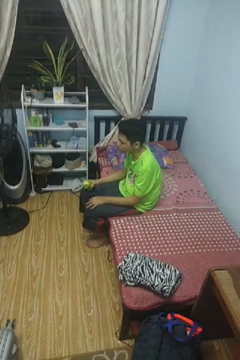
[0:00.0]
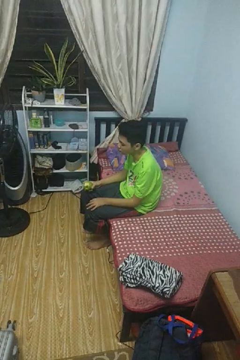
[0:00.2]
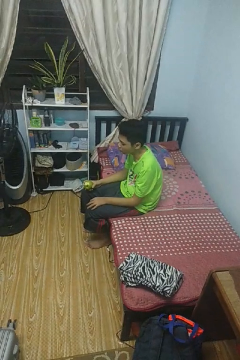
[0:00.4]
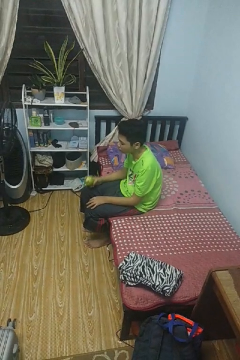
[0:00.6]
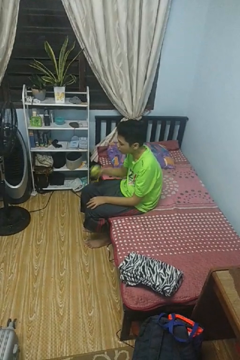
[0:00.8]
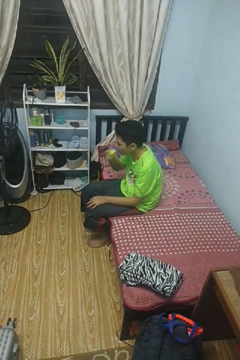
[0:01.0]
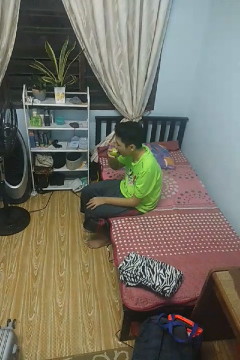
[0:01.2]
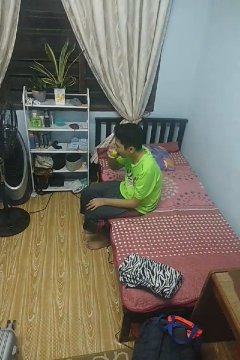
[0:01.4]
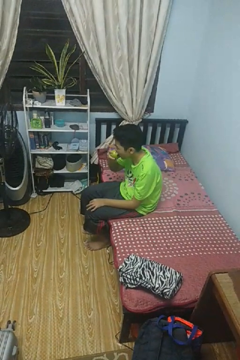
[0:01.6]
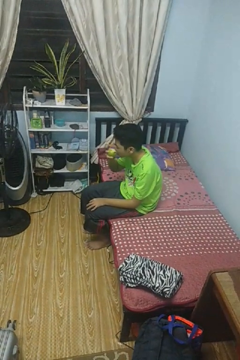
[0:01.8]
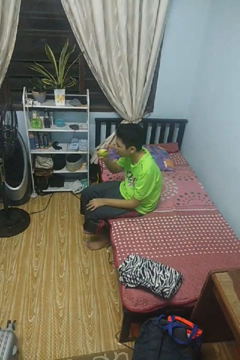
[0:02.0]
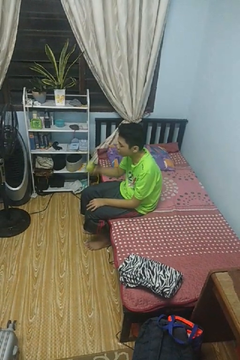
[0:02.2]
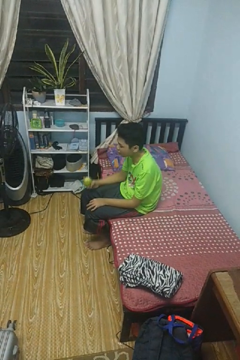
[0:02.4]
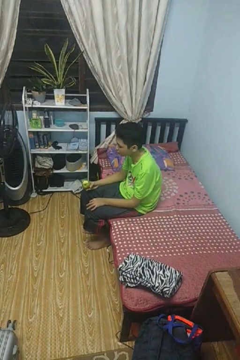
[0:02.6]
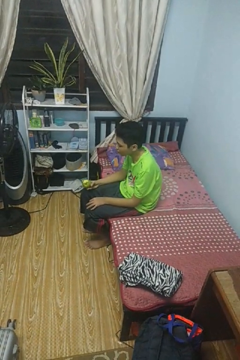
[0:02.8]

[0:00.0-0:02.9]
person eats apple

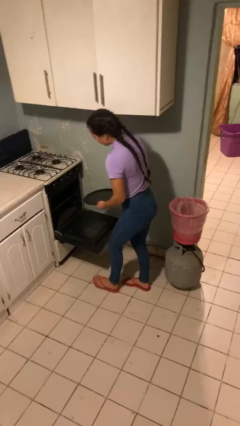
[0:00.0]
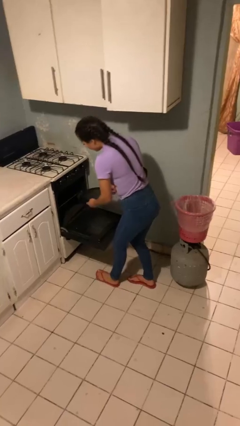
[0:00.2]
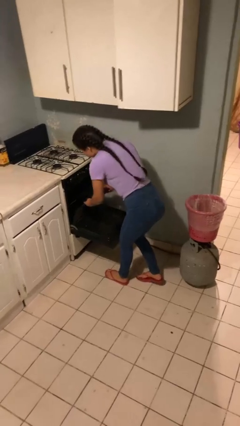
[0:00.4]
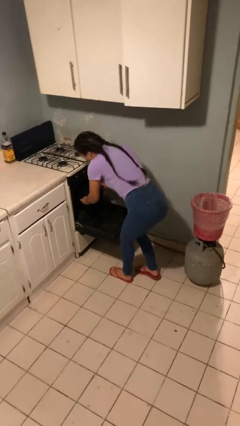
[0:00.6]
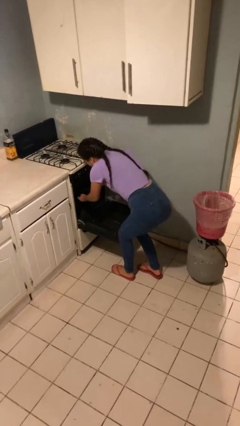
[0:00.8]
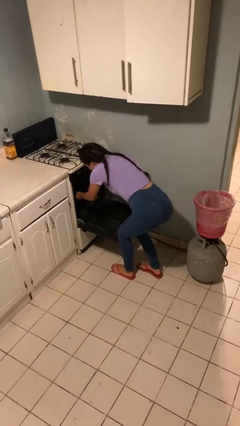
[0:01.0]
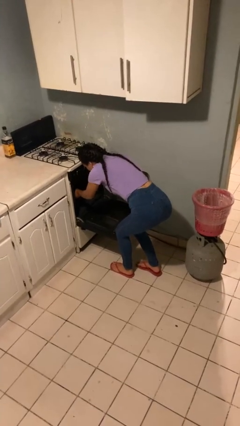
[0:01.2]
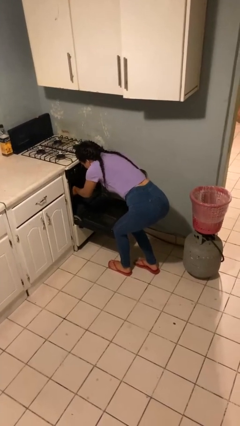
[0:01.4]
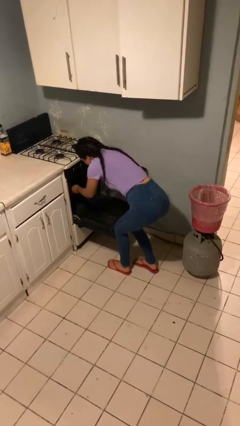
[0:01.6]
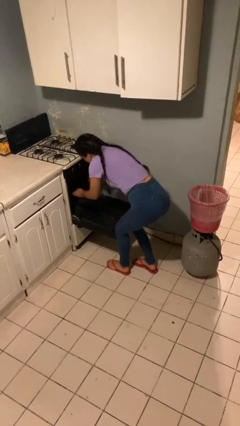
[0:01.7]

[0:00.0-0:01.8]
person puts object into toaster

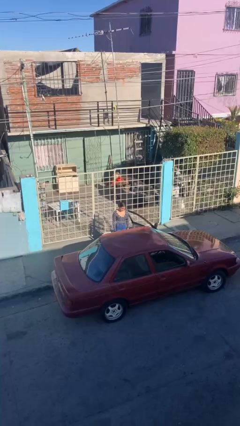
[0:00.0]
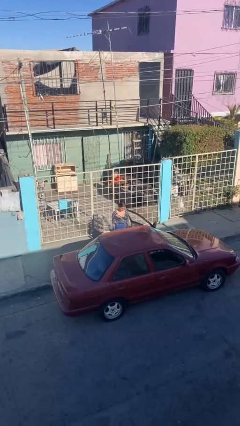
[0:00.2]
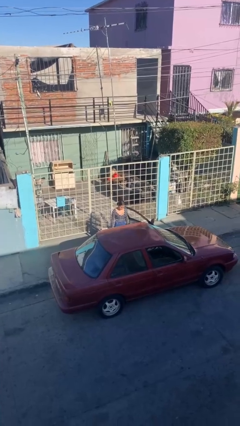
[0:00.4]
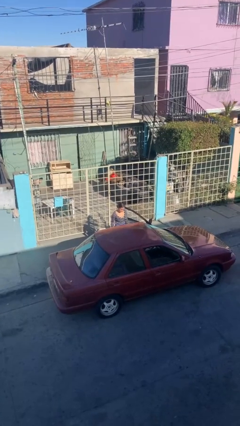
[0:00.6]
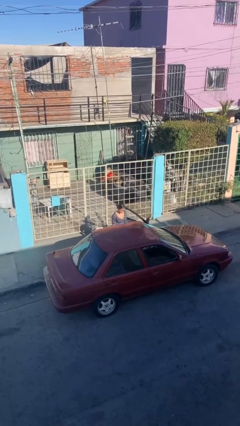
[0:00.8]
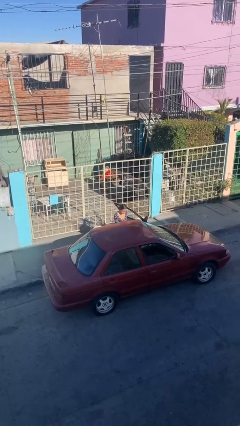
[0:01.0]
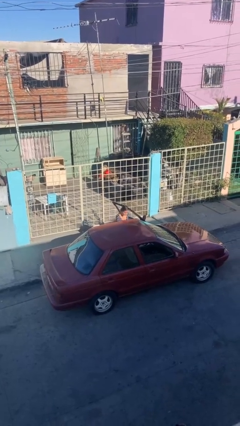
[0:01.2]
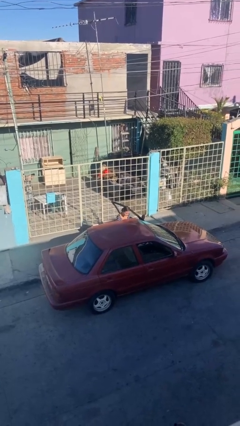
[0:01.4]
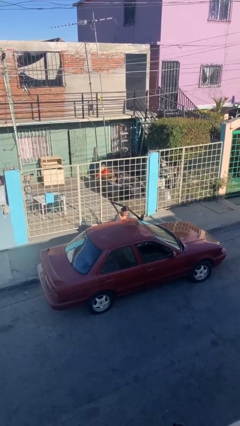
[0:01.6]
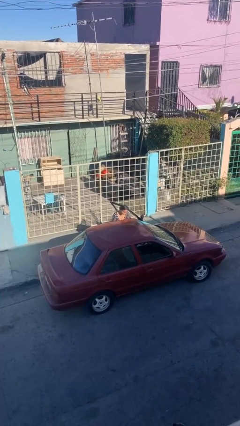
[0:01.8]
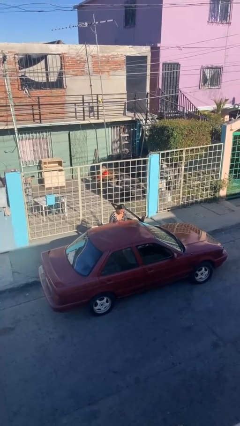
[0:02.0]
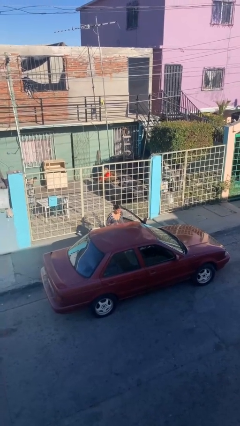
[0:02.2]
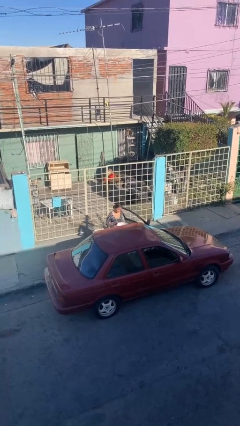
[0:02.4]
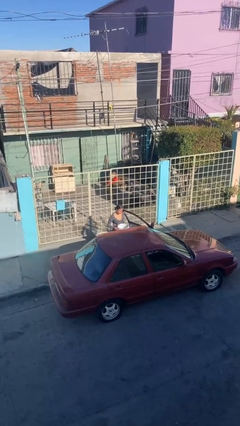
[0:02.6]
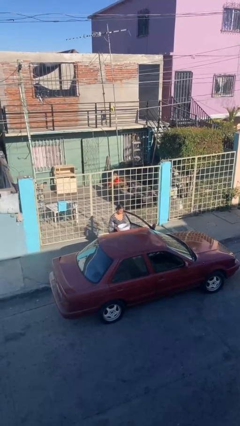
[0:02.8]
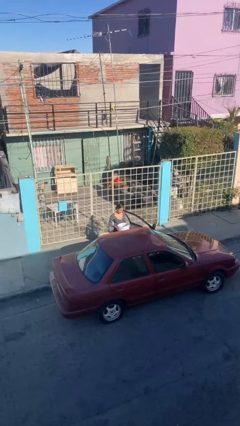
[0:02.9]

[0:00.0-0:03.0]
person unloads car

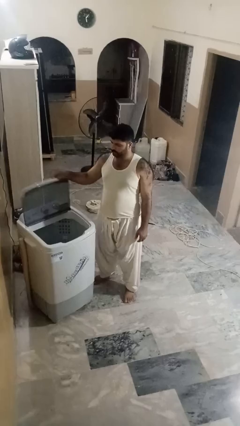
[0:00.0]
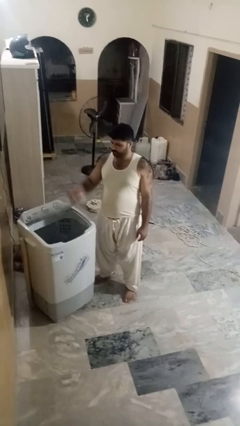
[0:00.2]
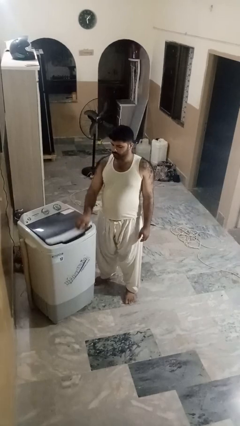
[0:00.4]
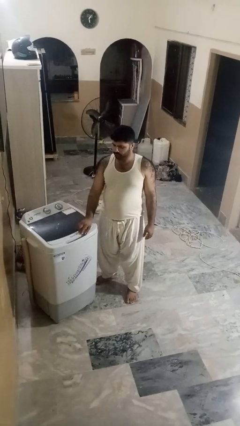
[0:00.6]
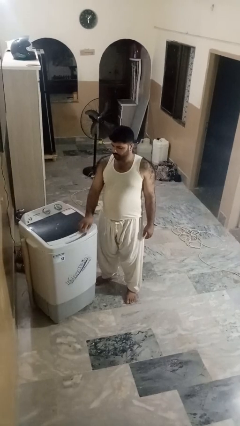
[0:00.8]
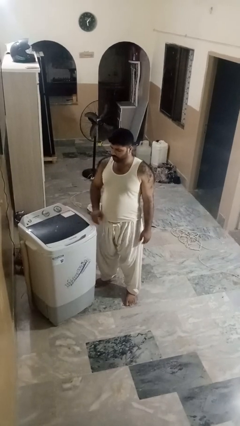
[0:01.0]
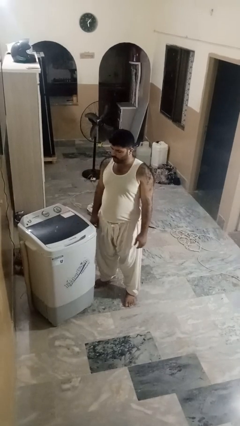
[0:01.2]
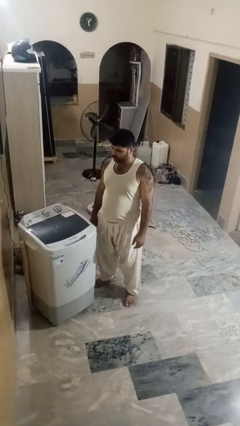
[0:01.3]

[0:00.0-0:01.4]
person closes clothes washer

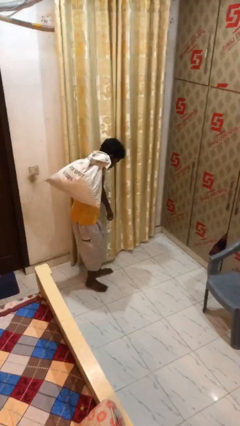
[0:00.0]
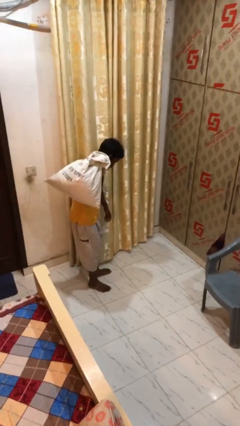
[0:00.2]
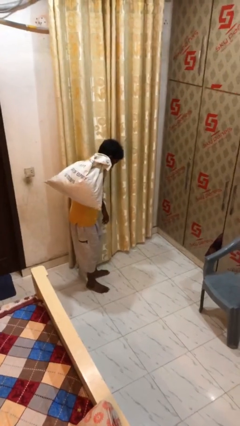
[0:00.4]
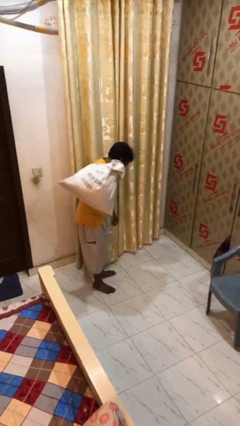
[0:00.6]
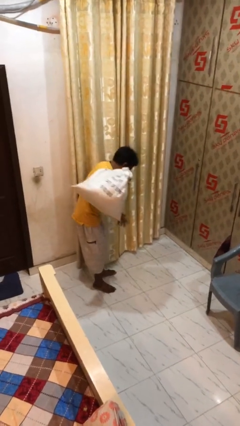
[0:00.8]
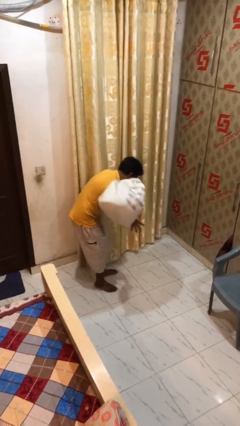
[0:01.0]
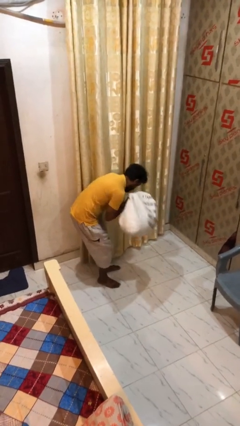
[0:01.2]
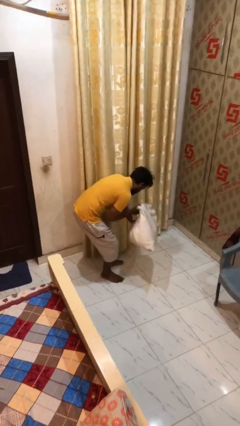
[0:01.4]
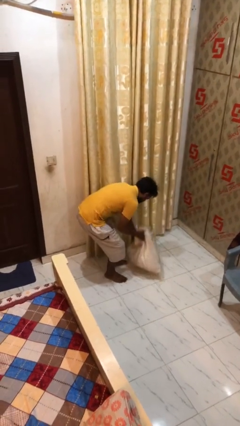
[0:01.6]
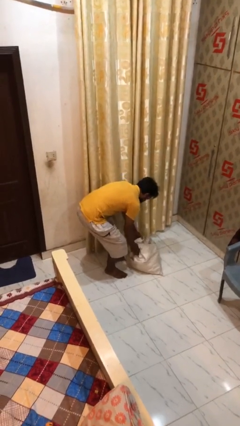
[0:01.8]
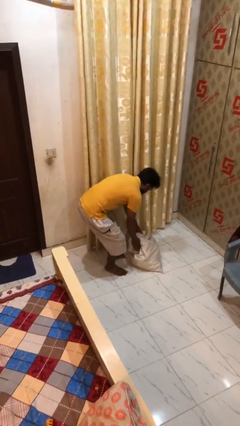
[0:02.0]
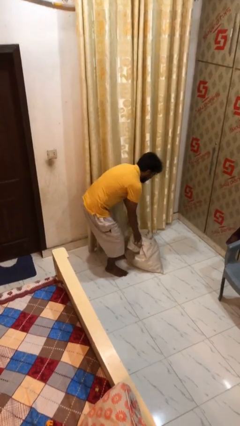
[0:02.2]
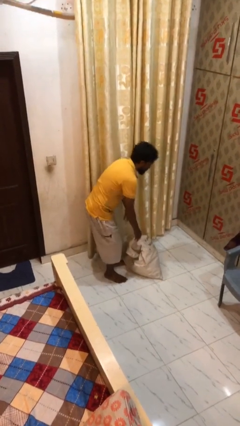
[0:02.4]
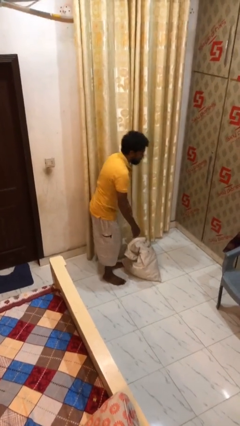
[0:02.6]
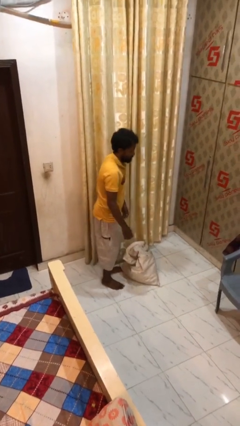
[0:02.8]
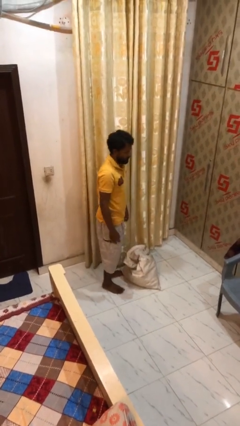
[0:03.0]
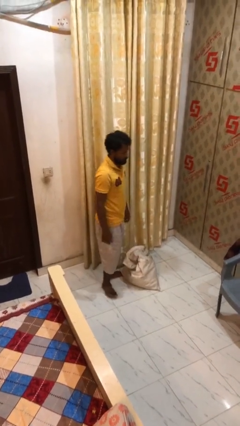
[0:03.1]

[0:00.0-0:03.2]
person puts down object on floor

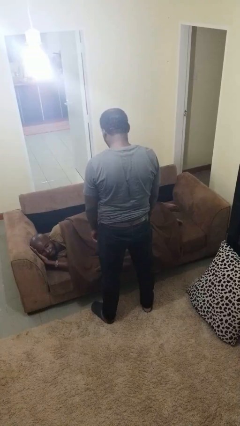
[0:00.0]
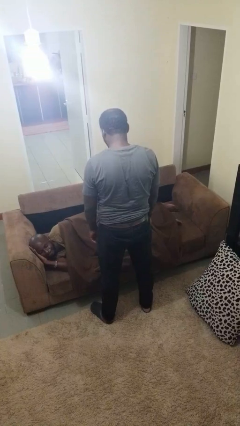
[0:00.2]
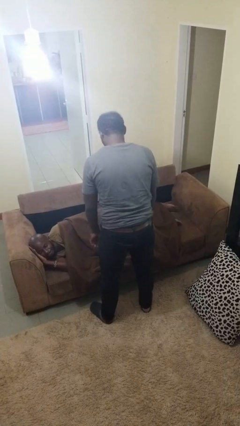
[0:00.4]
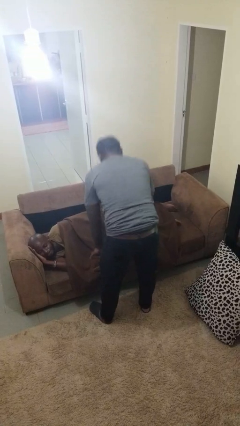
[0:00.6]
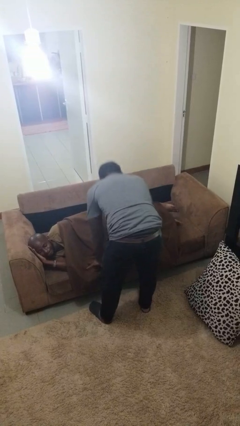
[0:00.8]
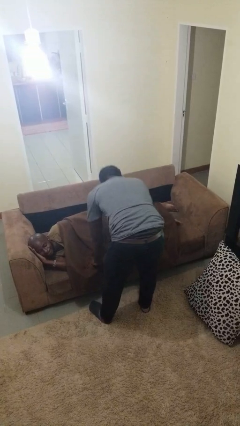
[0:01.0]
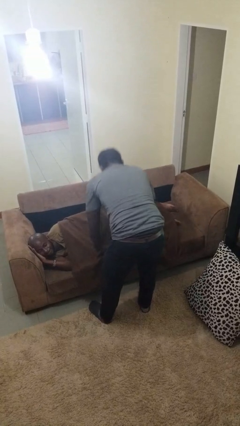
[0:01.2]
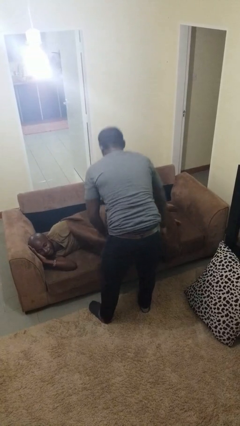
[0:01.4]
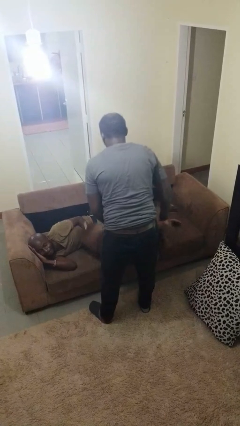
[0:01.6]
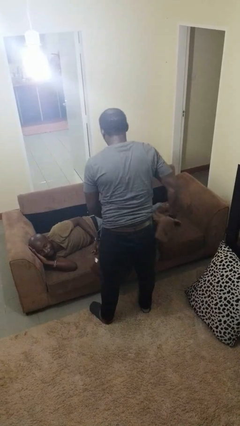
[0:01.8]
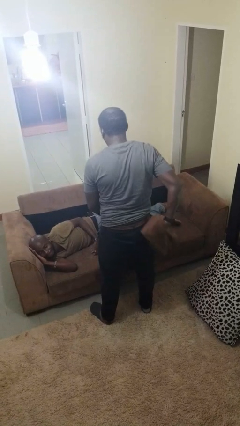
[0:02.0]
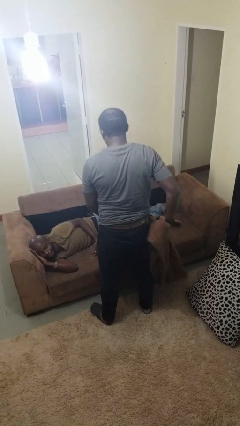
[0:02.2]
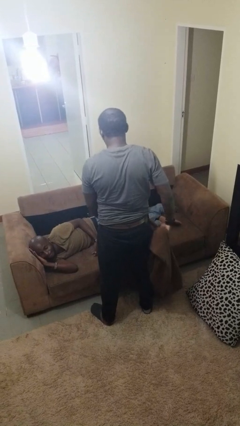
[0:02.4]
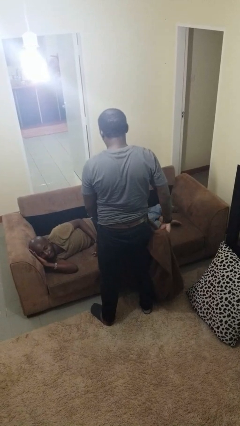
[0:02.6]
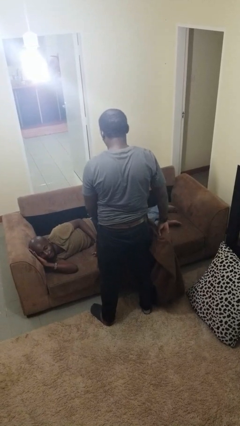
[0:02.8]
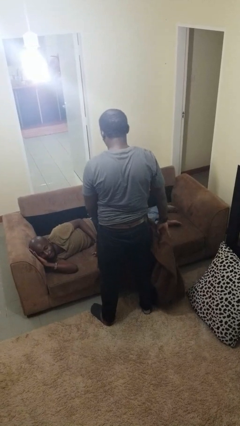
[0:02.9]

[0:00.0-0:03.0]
person uncovers friend with blanket

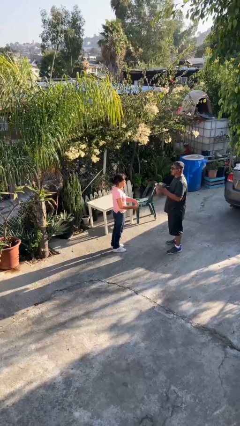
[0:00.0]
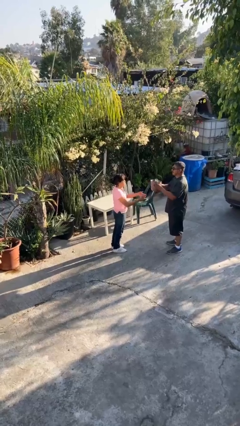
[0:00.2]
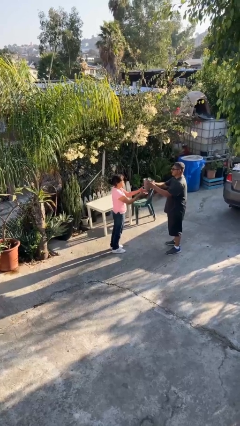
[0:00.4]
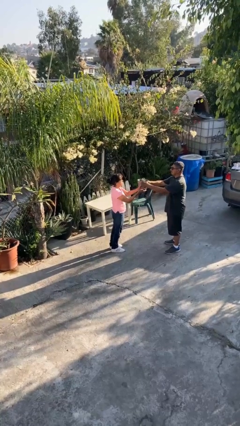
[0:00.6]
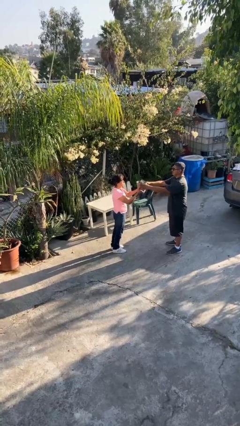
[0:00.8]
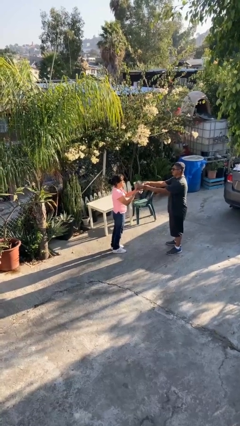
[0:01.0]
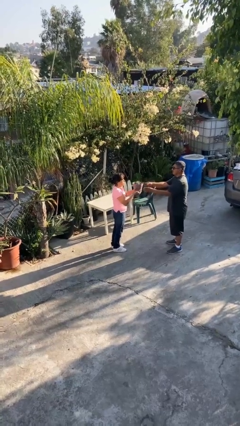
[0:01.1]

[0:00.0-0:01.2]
person transfers object to person

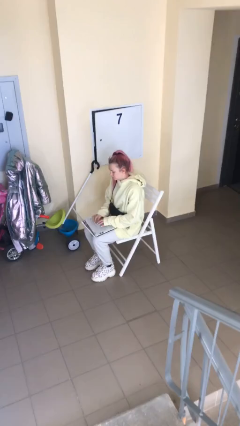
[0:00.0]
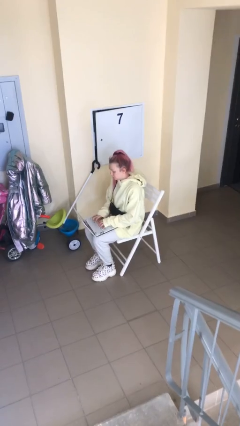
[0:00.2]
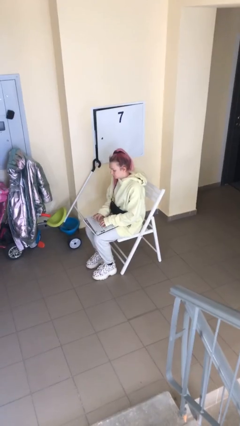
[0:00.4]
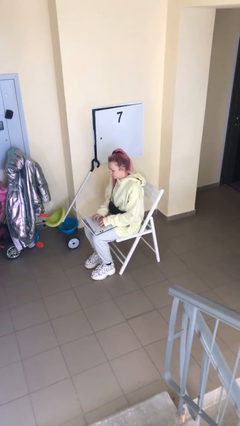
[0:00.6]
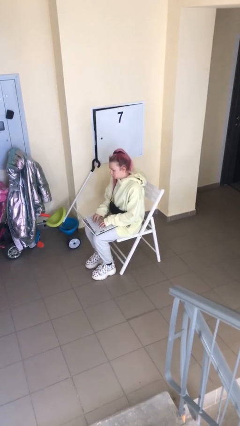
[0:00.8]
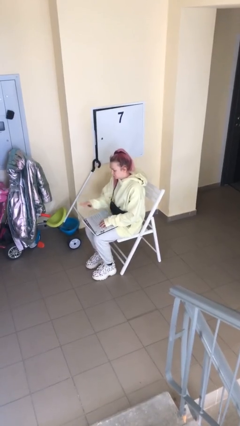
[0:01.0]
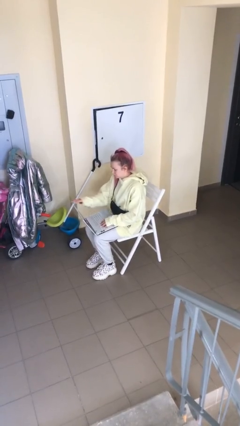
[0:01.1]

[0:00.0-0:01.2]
person interacts with laptop

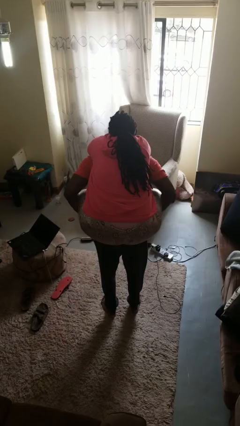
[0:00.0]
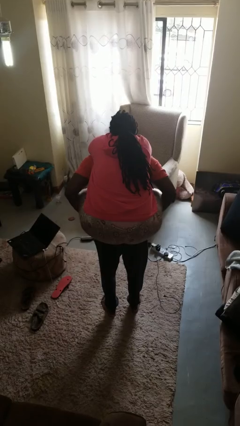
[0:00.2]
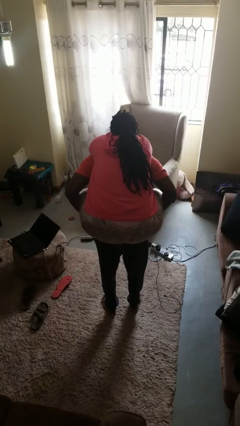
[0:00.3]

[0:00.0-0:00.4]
person carries person on back
